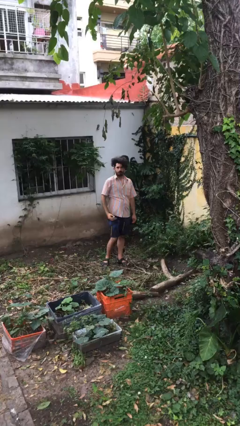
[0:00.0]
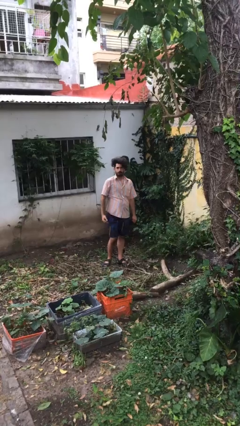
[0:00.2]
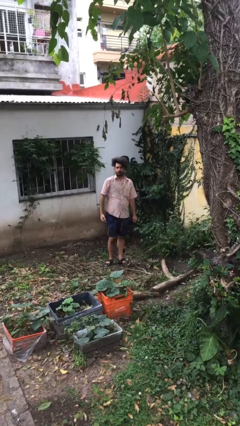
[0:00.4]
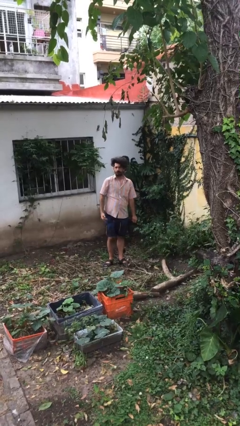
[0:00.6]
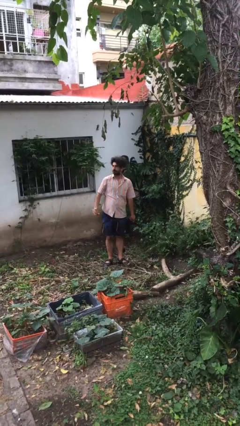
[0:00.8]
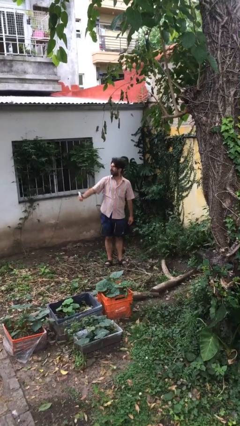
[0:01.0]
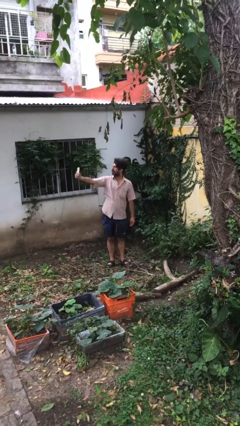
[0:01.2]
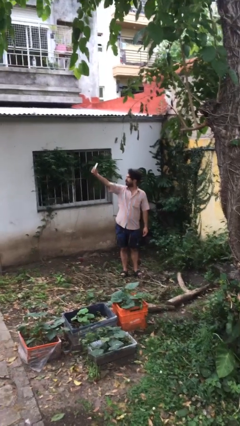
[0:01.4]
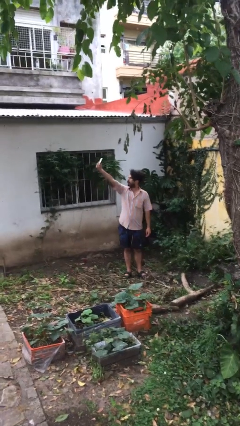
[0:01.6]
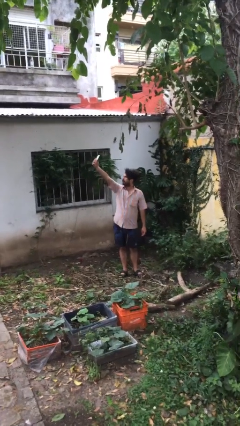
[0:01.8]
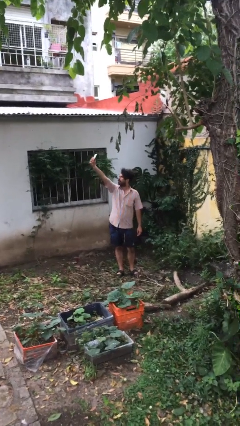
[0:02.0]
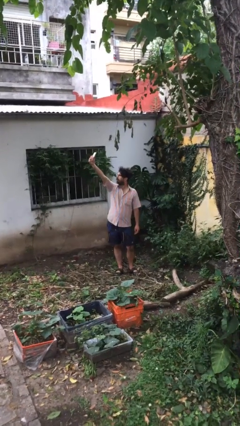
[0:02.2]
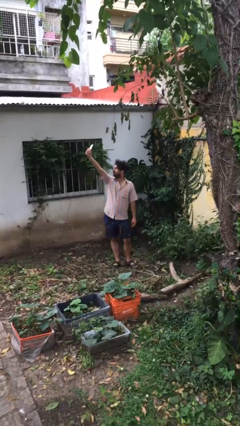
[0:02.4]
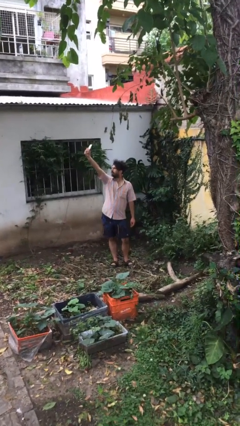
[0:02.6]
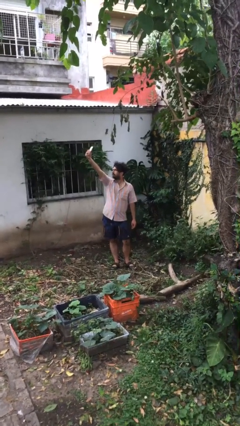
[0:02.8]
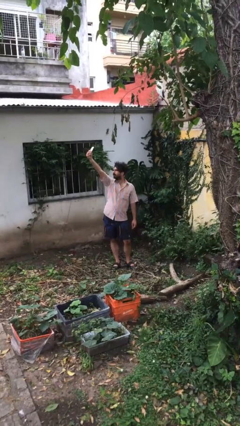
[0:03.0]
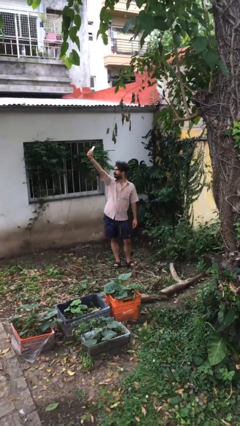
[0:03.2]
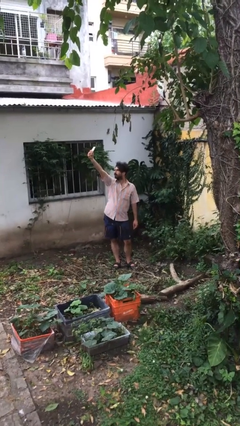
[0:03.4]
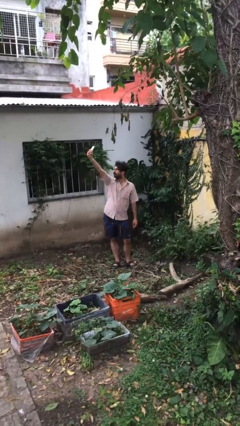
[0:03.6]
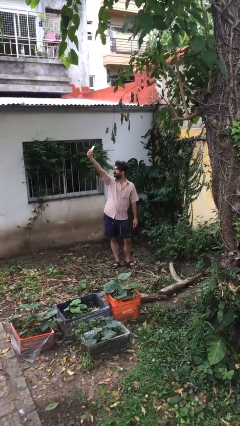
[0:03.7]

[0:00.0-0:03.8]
person takes selfie

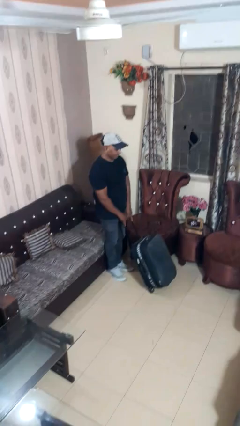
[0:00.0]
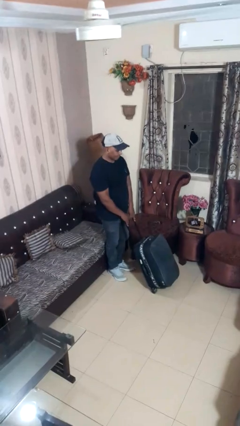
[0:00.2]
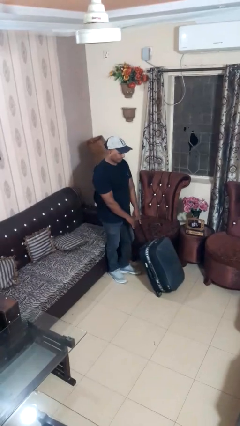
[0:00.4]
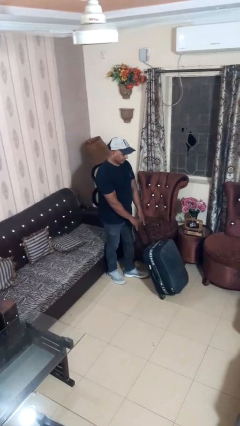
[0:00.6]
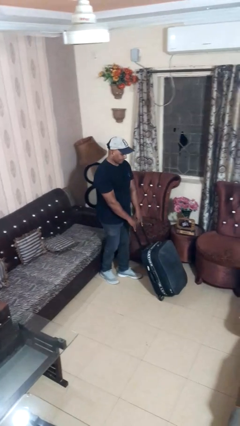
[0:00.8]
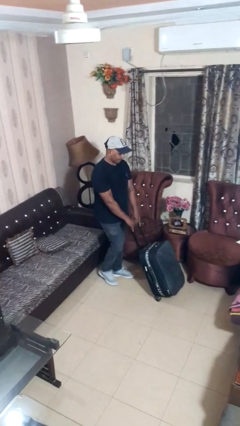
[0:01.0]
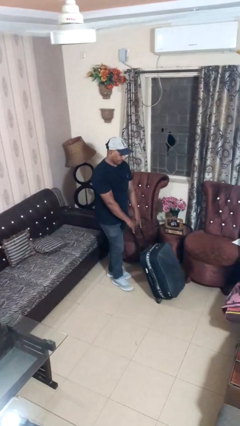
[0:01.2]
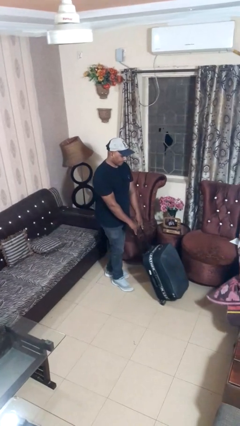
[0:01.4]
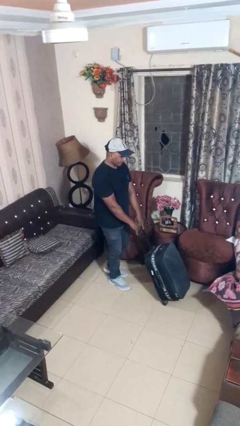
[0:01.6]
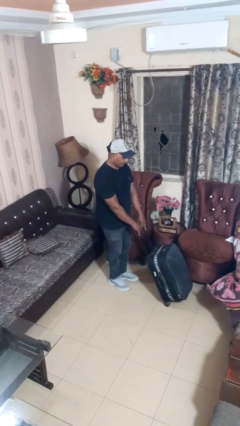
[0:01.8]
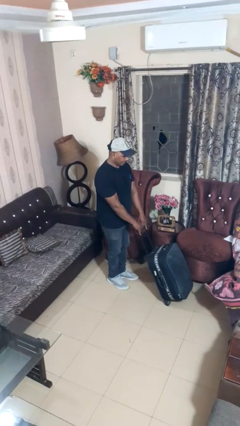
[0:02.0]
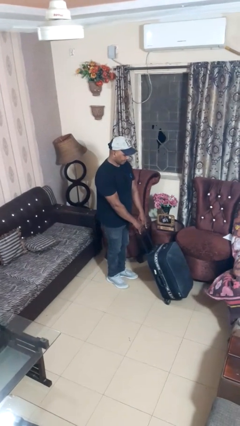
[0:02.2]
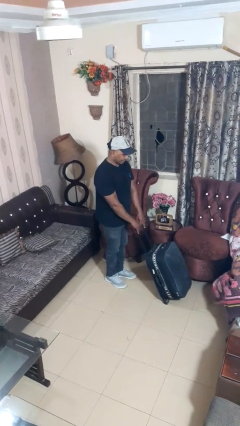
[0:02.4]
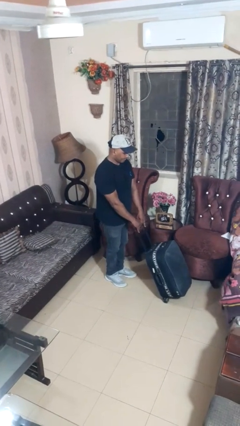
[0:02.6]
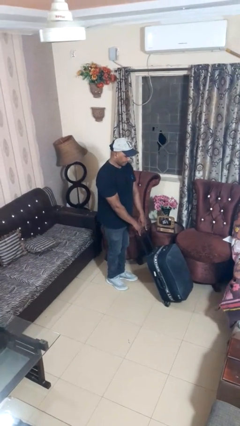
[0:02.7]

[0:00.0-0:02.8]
person pushes wheeled cart

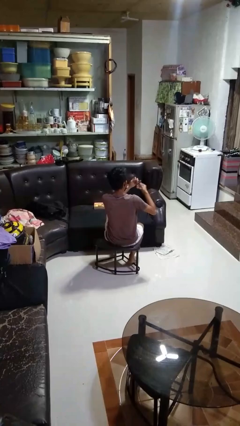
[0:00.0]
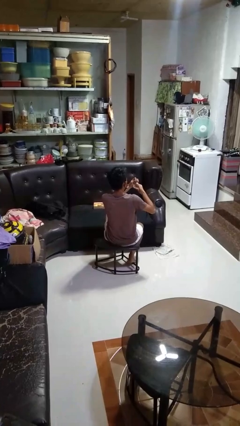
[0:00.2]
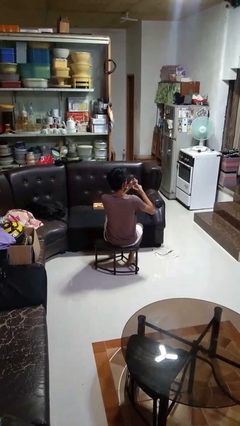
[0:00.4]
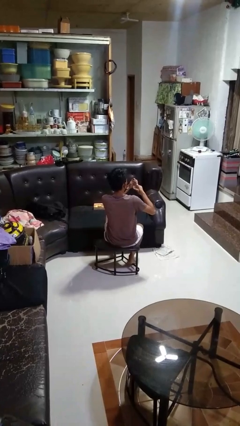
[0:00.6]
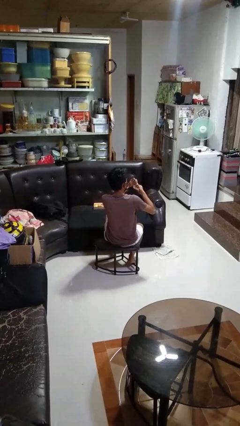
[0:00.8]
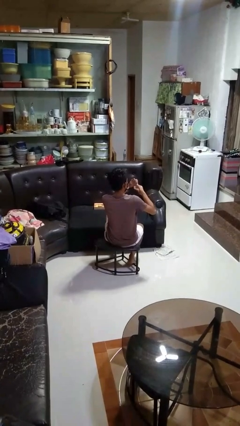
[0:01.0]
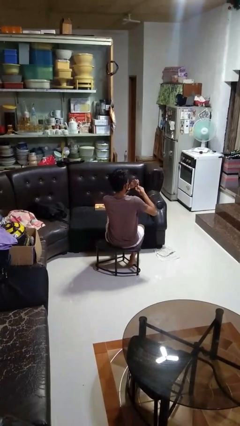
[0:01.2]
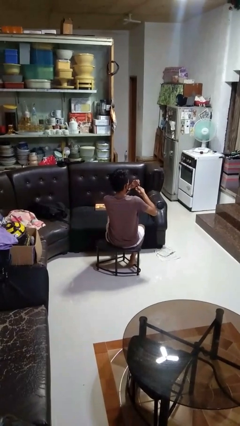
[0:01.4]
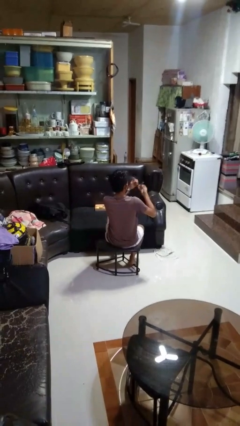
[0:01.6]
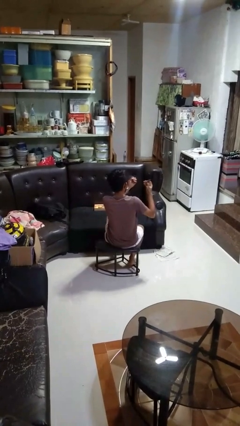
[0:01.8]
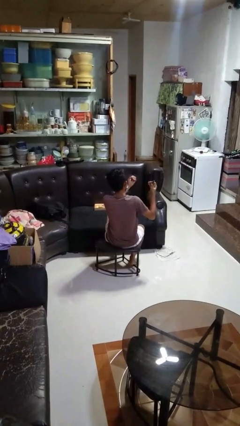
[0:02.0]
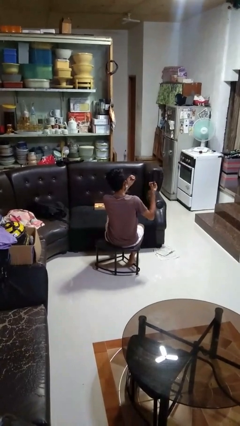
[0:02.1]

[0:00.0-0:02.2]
person clips fingernails

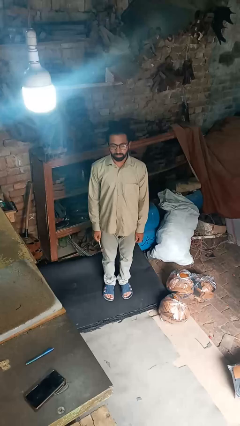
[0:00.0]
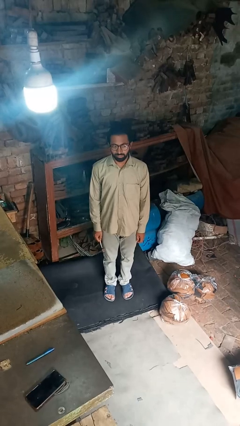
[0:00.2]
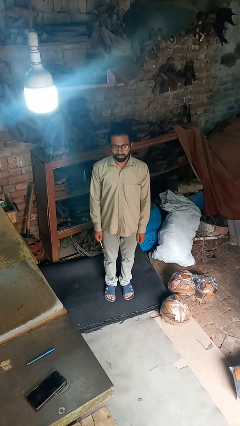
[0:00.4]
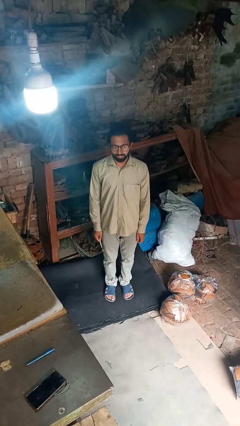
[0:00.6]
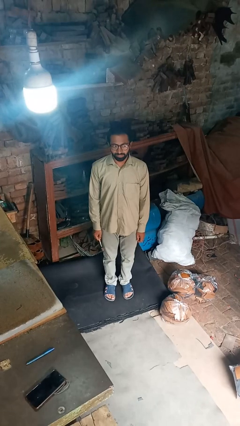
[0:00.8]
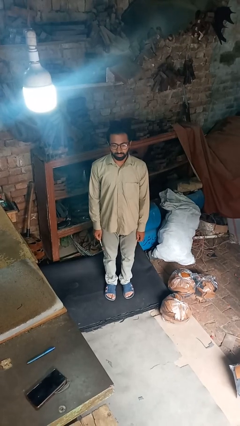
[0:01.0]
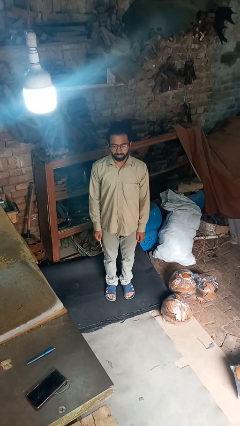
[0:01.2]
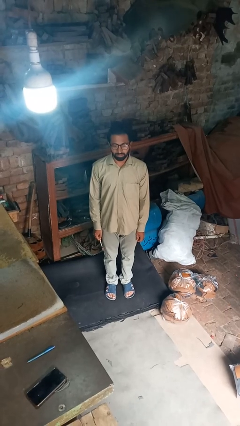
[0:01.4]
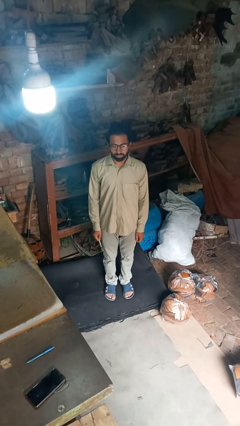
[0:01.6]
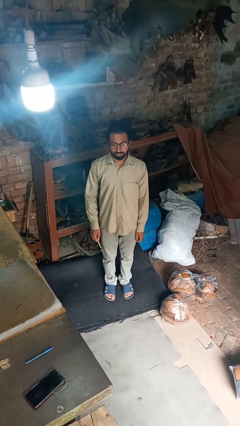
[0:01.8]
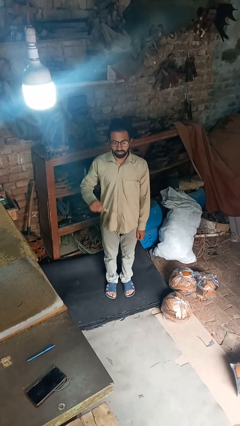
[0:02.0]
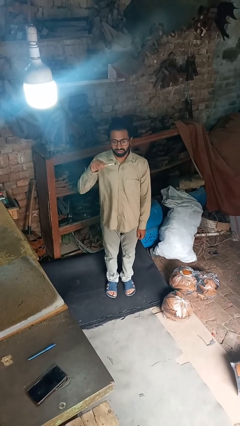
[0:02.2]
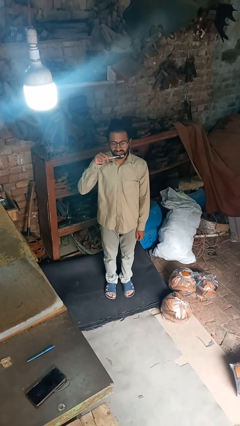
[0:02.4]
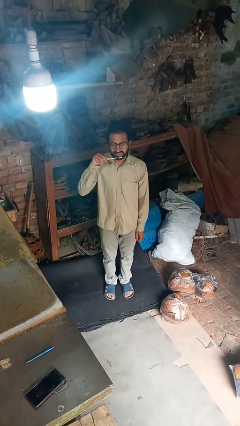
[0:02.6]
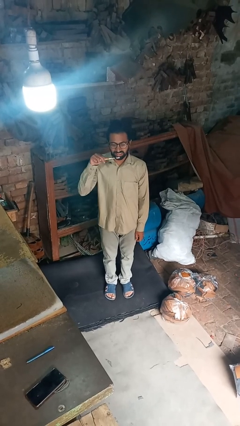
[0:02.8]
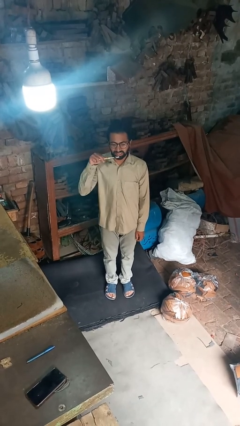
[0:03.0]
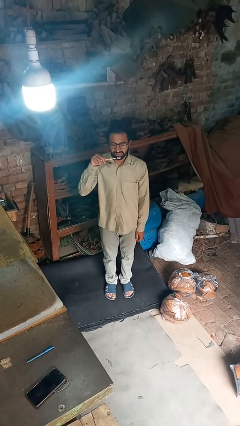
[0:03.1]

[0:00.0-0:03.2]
person brushes teeth

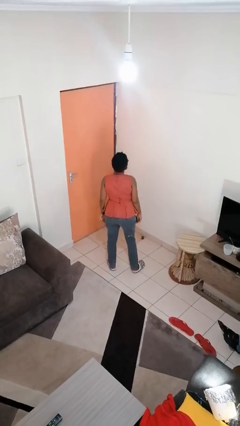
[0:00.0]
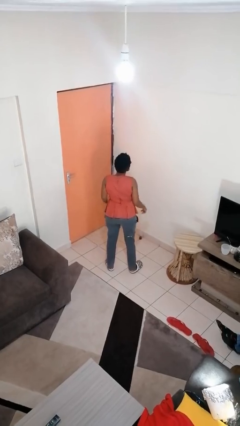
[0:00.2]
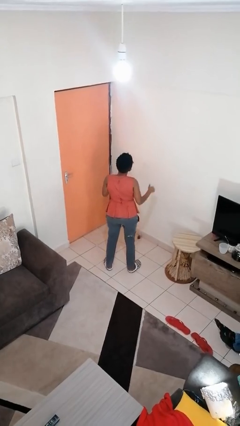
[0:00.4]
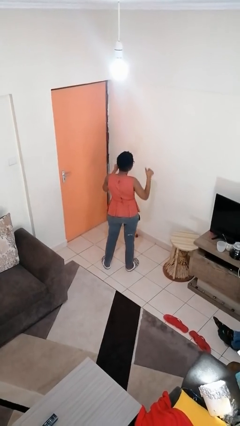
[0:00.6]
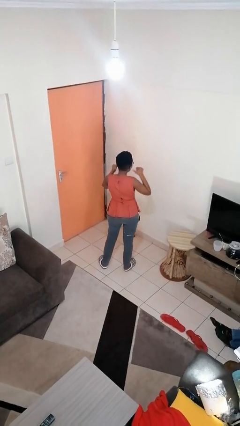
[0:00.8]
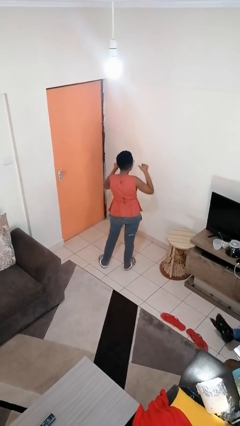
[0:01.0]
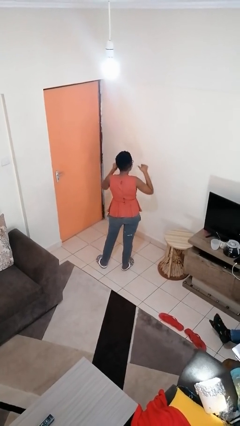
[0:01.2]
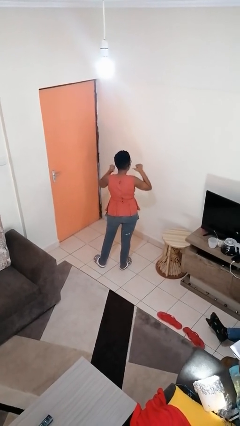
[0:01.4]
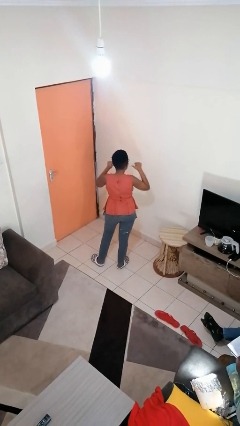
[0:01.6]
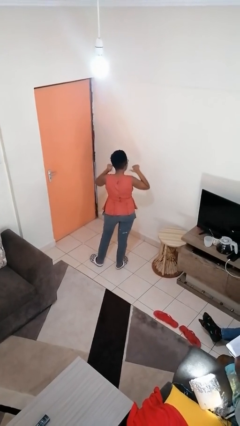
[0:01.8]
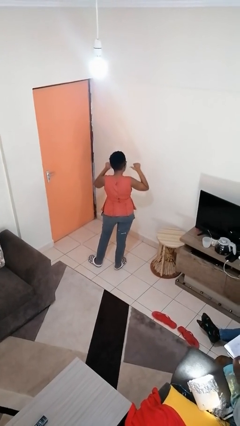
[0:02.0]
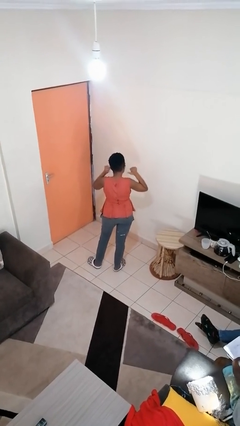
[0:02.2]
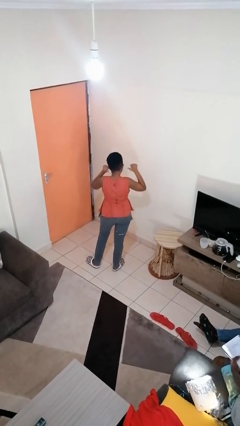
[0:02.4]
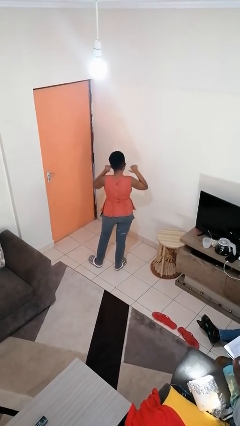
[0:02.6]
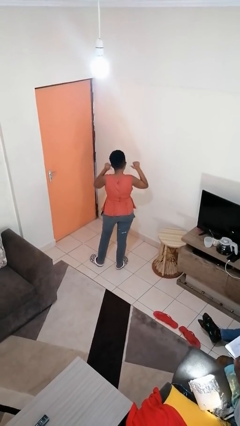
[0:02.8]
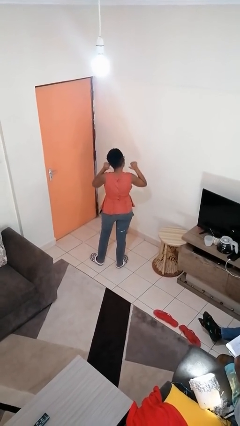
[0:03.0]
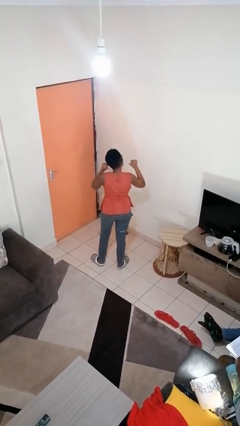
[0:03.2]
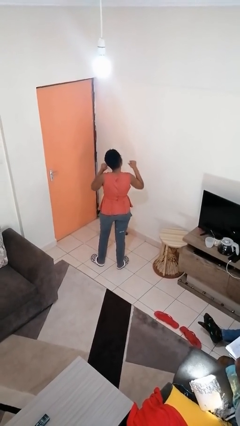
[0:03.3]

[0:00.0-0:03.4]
person gestures behind me

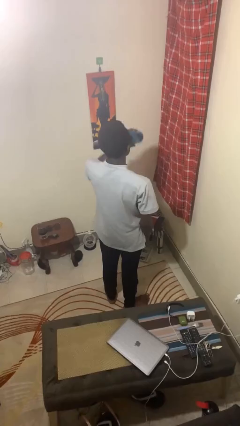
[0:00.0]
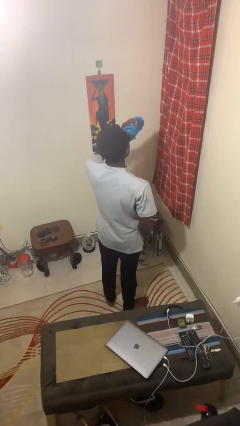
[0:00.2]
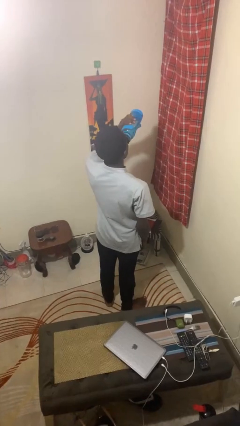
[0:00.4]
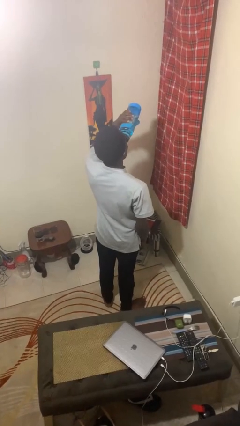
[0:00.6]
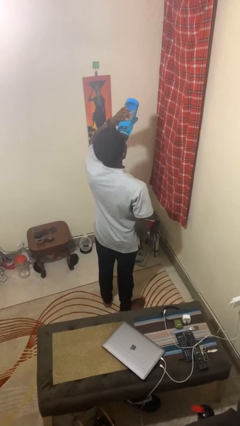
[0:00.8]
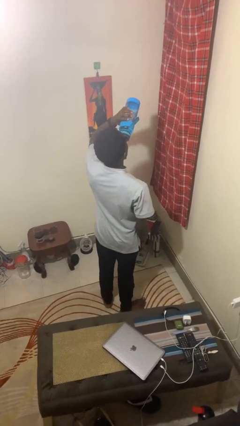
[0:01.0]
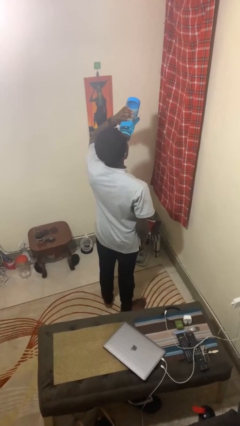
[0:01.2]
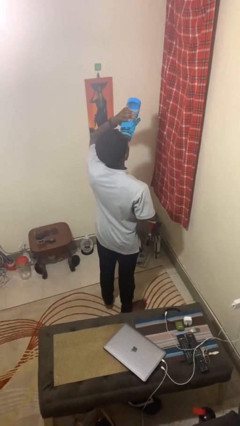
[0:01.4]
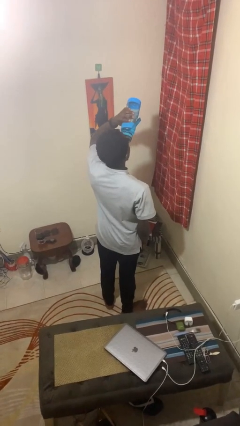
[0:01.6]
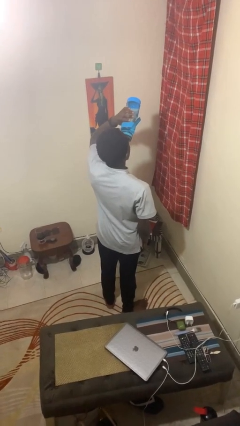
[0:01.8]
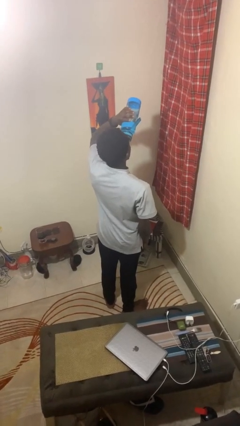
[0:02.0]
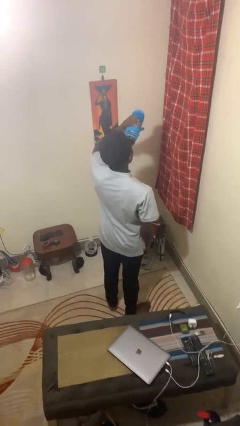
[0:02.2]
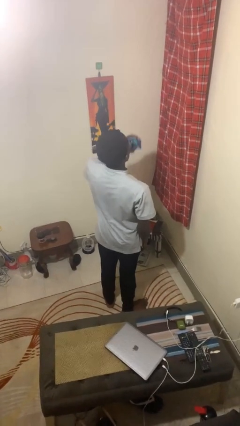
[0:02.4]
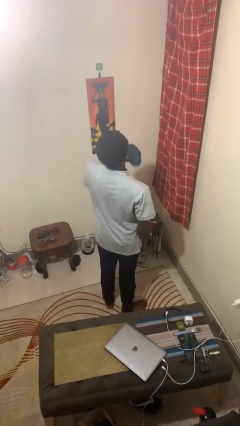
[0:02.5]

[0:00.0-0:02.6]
person drinks from bottle
